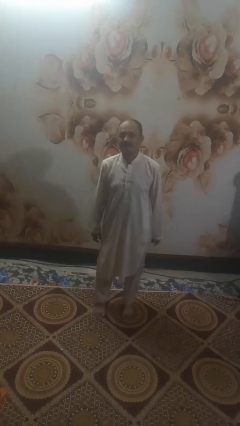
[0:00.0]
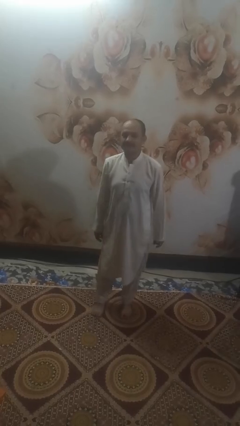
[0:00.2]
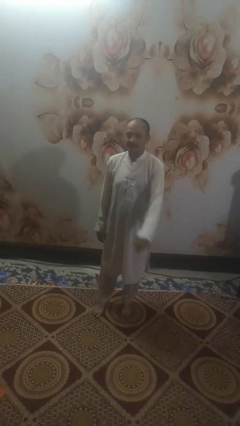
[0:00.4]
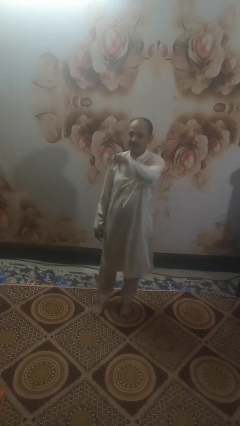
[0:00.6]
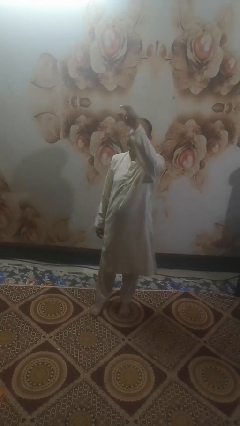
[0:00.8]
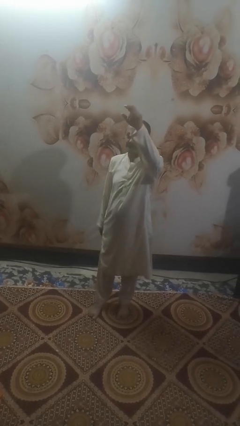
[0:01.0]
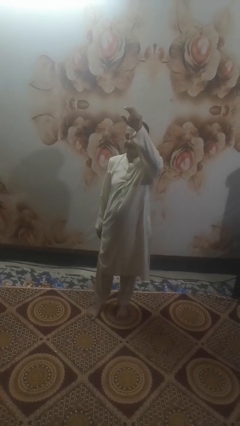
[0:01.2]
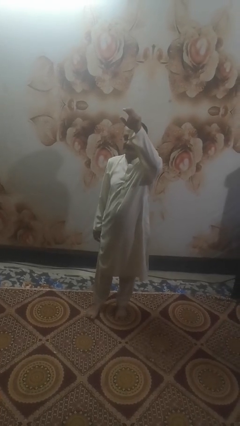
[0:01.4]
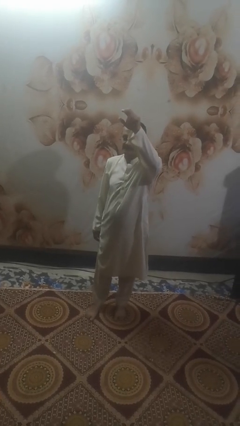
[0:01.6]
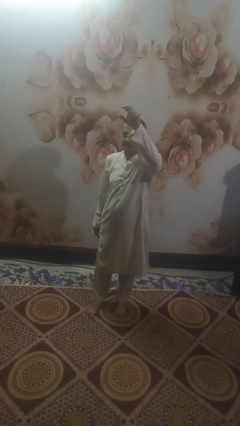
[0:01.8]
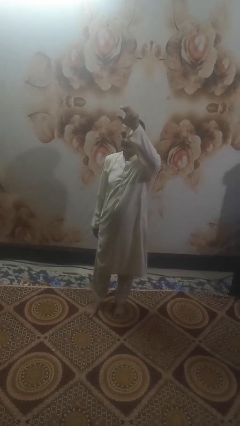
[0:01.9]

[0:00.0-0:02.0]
person gestures swipe up

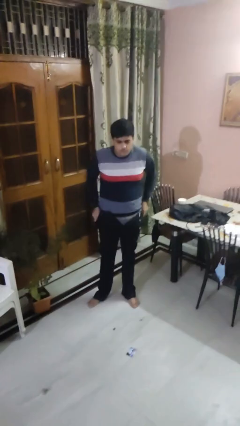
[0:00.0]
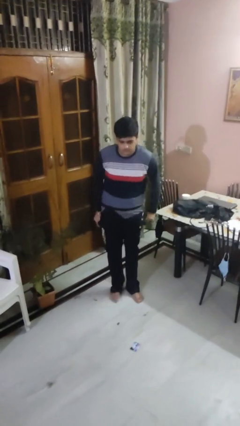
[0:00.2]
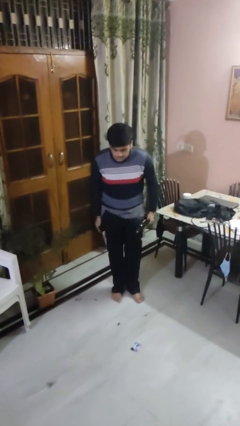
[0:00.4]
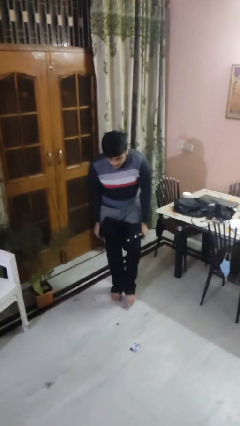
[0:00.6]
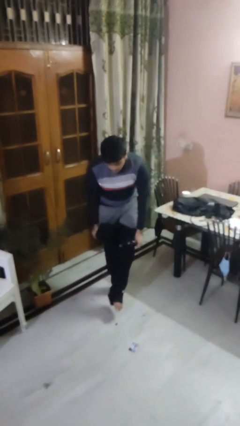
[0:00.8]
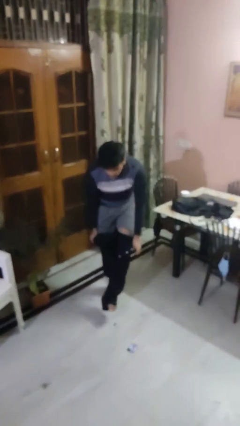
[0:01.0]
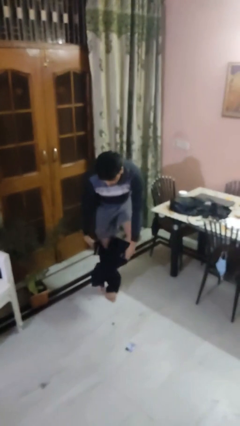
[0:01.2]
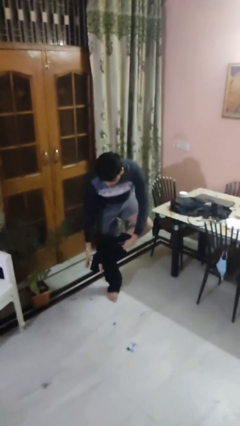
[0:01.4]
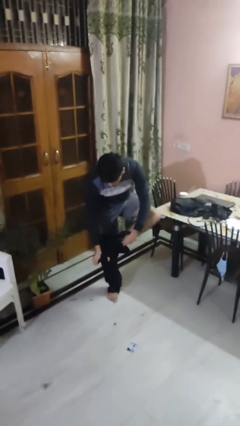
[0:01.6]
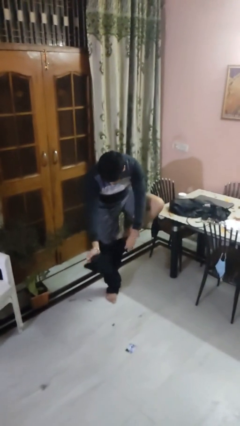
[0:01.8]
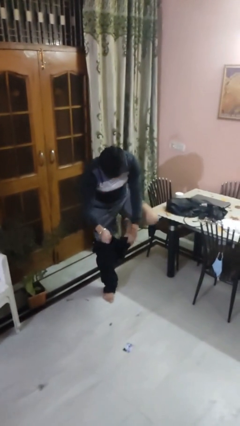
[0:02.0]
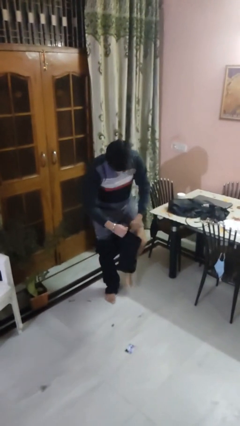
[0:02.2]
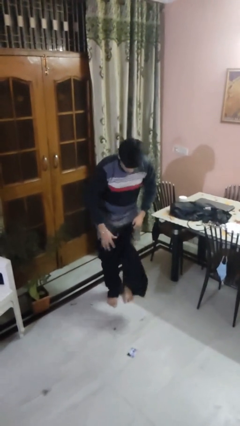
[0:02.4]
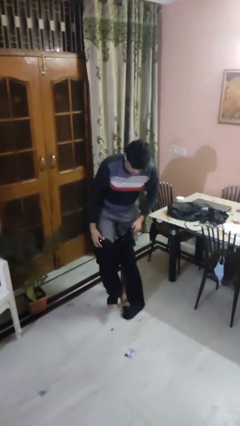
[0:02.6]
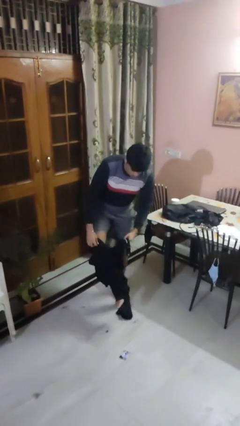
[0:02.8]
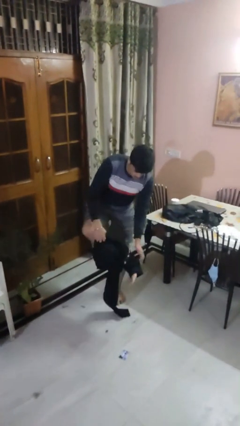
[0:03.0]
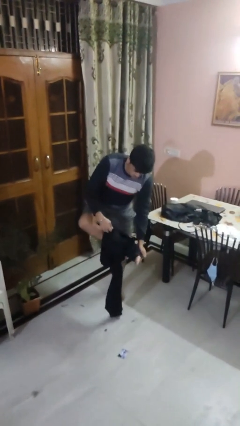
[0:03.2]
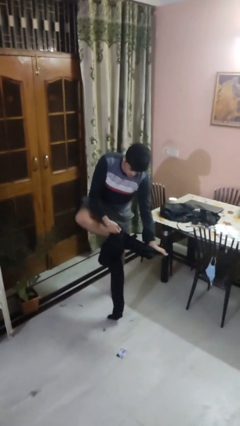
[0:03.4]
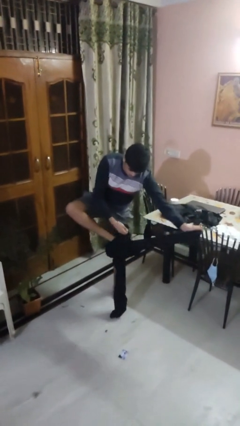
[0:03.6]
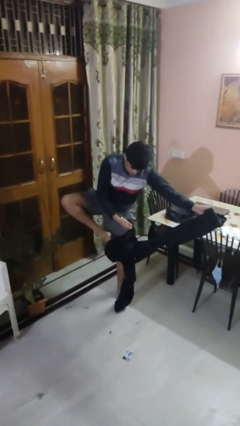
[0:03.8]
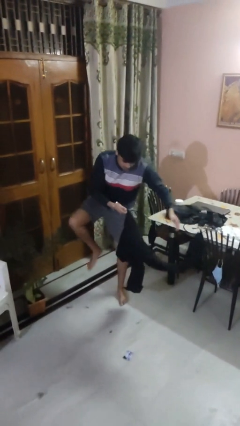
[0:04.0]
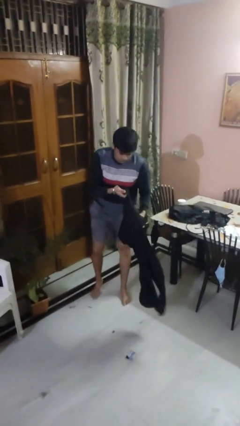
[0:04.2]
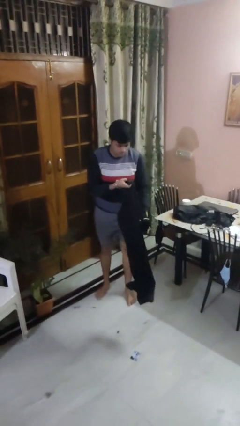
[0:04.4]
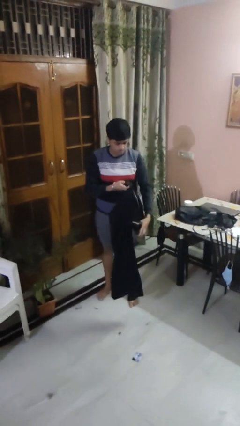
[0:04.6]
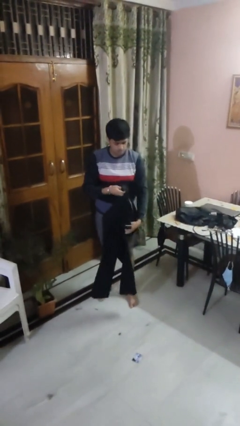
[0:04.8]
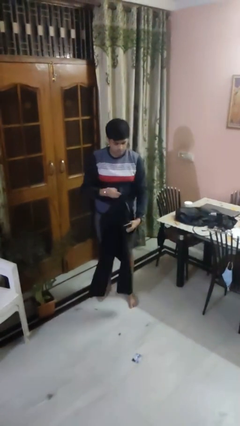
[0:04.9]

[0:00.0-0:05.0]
person takes off pants

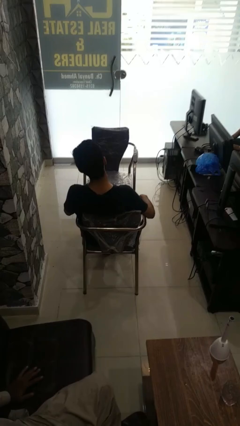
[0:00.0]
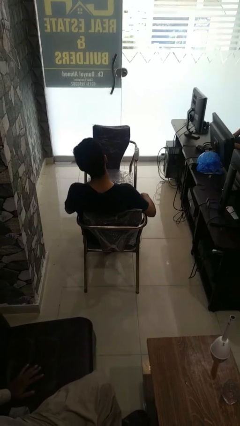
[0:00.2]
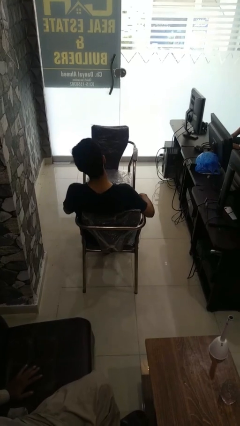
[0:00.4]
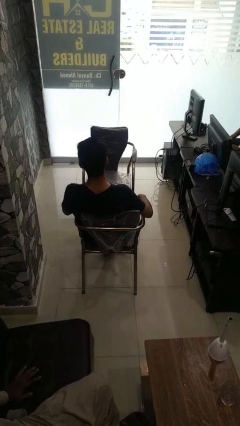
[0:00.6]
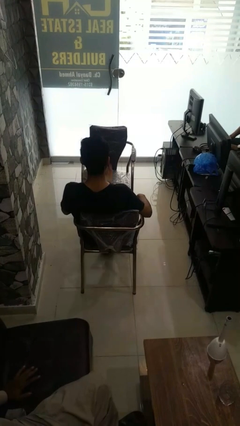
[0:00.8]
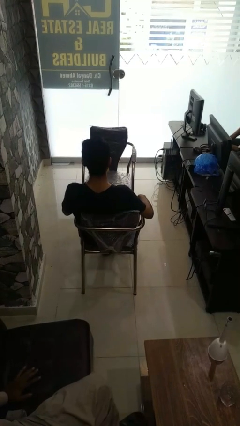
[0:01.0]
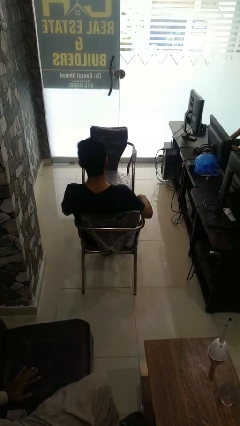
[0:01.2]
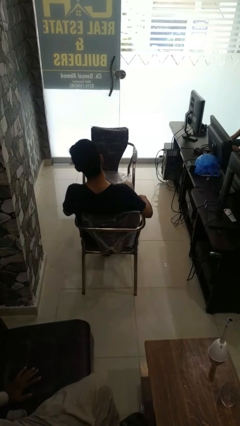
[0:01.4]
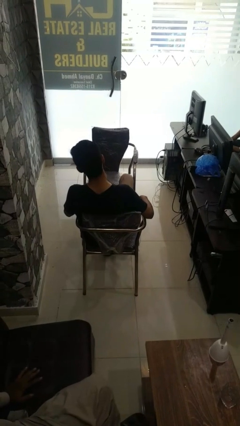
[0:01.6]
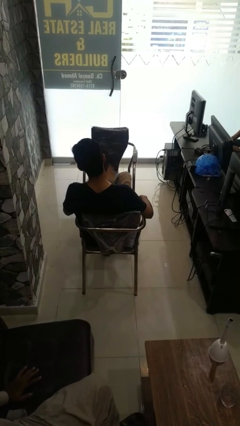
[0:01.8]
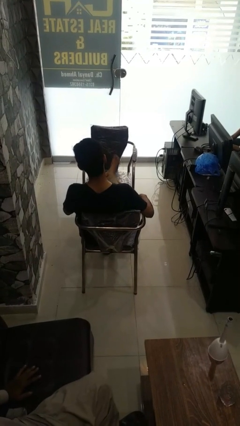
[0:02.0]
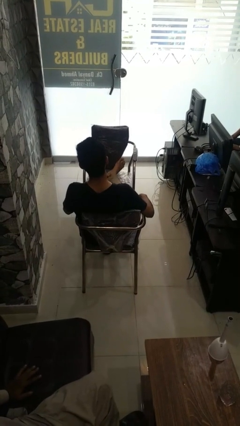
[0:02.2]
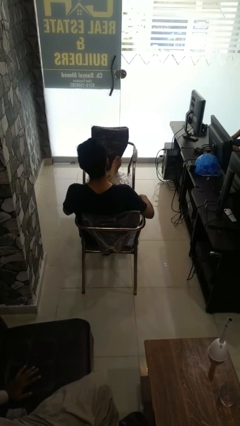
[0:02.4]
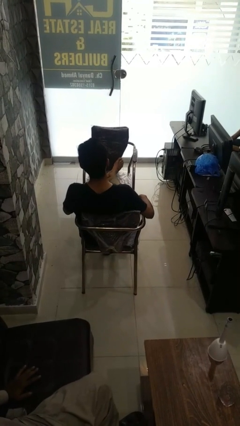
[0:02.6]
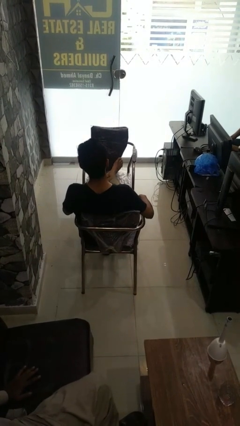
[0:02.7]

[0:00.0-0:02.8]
person puts feet up

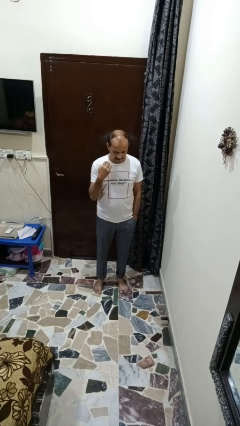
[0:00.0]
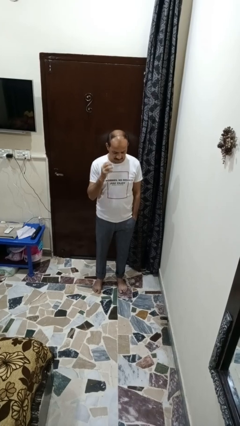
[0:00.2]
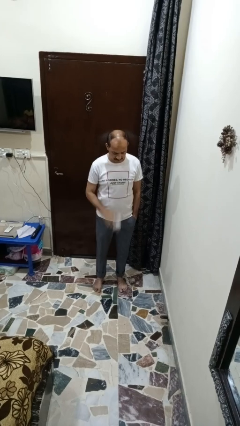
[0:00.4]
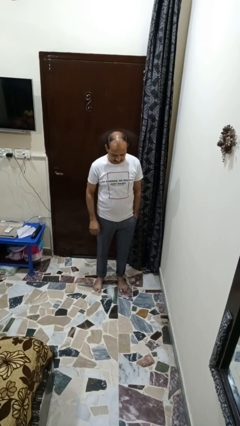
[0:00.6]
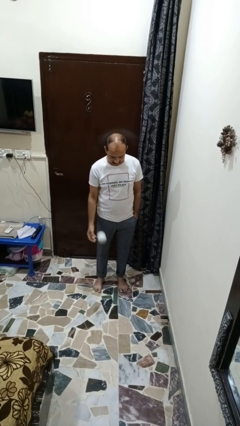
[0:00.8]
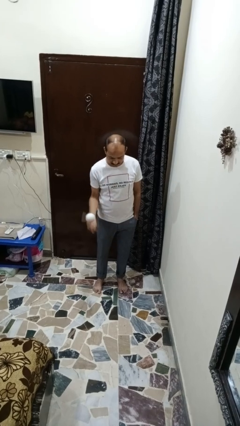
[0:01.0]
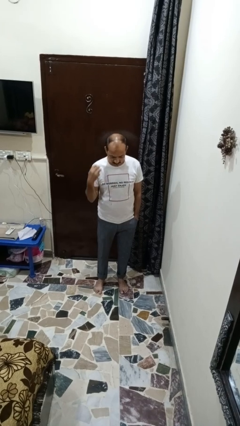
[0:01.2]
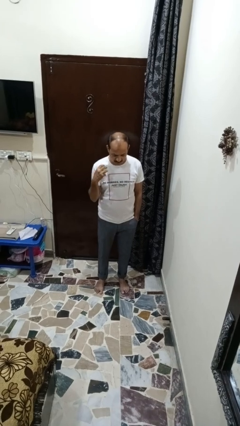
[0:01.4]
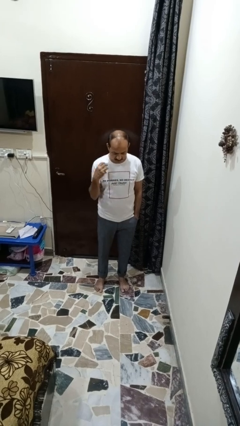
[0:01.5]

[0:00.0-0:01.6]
person bounces ball on floor

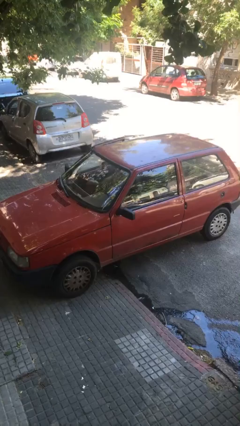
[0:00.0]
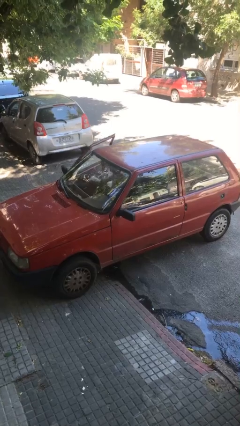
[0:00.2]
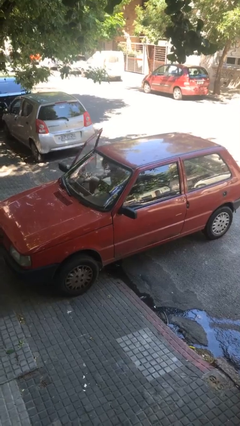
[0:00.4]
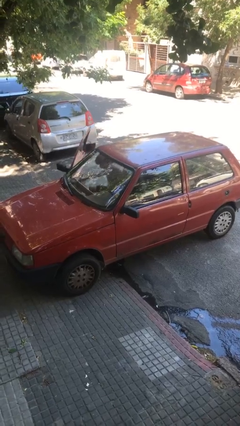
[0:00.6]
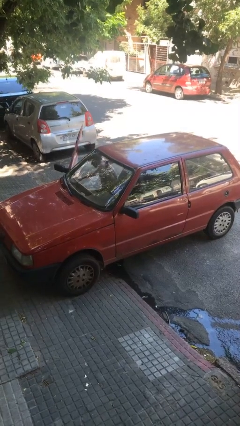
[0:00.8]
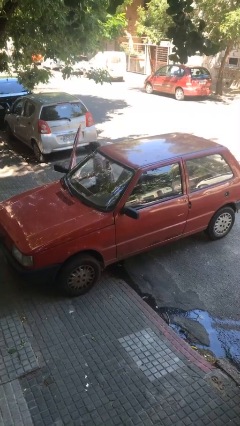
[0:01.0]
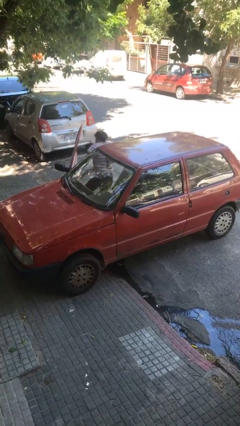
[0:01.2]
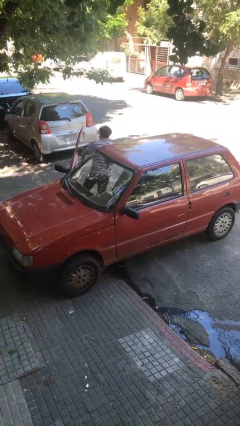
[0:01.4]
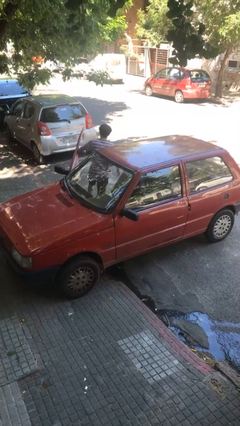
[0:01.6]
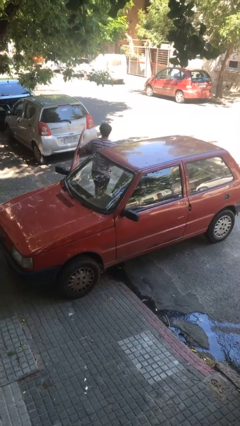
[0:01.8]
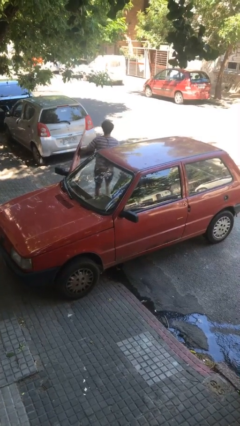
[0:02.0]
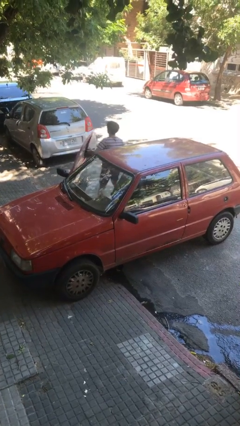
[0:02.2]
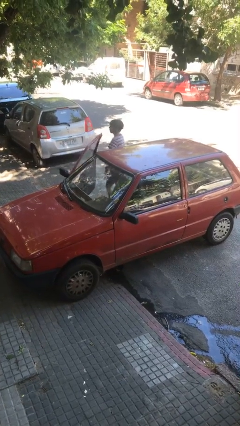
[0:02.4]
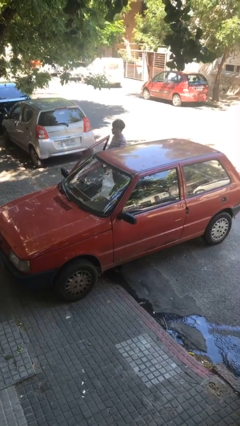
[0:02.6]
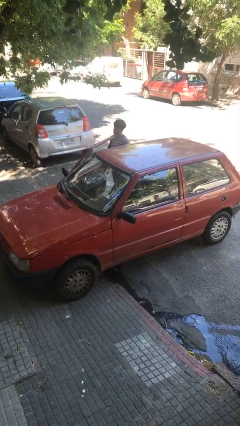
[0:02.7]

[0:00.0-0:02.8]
car drops off person

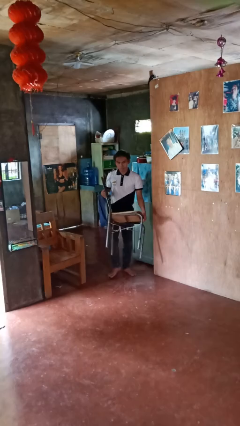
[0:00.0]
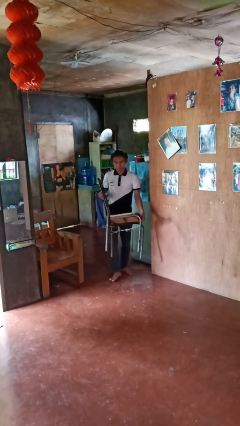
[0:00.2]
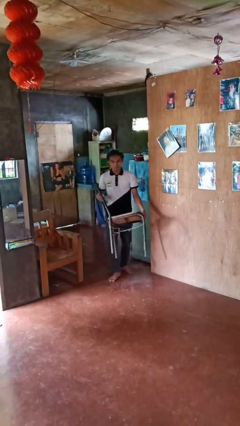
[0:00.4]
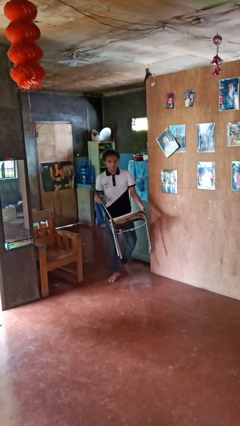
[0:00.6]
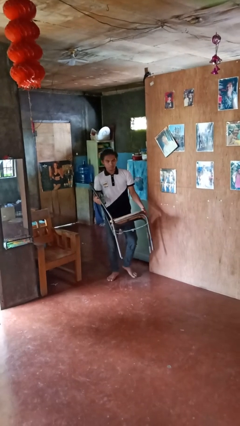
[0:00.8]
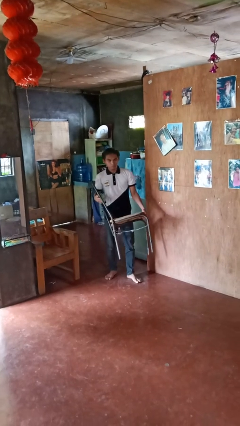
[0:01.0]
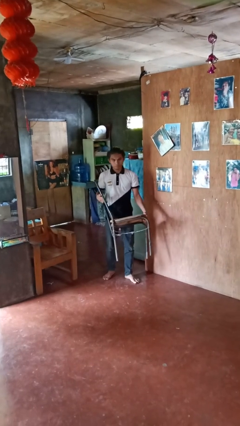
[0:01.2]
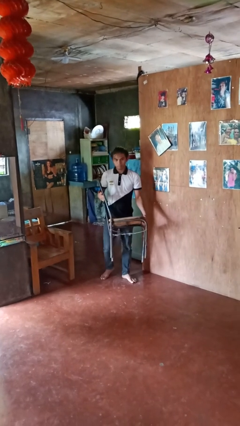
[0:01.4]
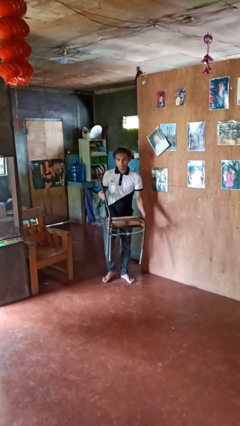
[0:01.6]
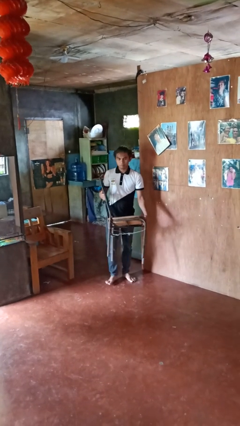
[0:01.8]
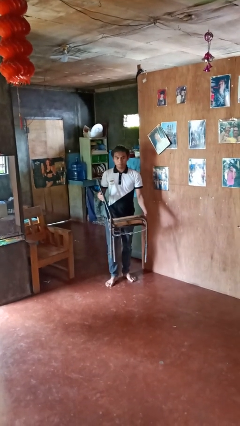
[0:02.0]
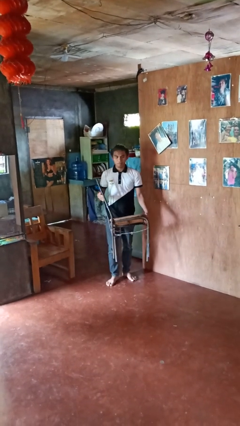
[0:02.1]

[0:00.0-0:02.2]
person carries furniture

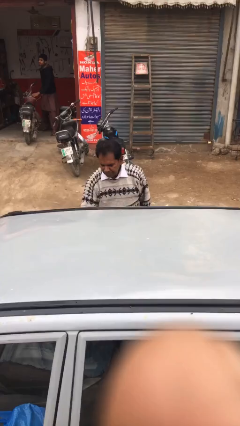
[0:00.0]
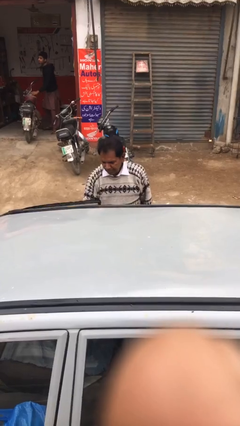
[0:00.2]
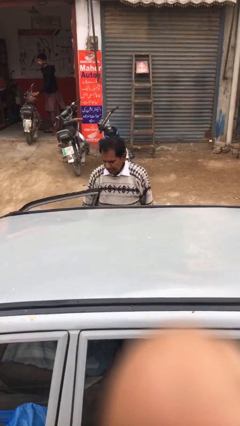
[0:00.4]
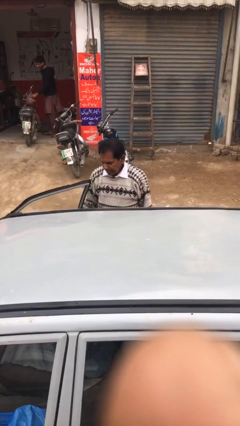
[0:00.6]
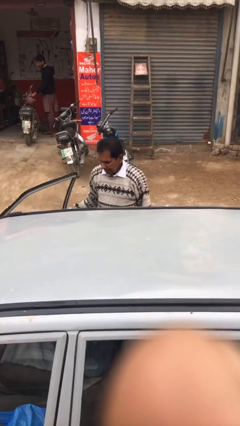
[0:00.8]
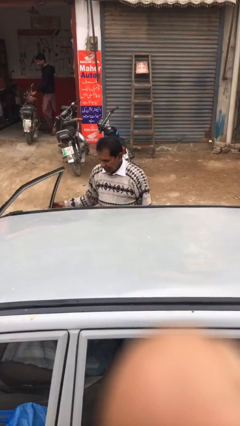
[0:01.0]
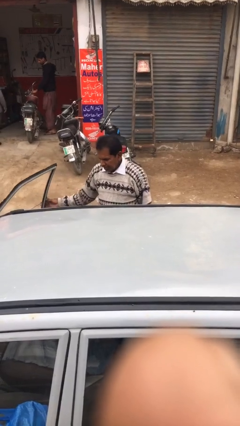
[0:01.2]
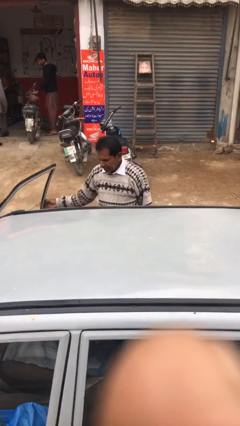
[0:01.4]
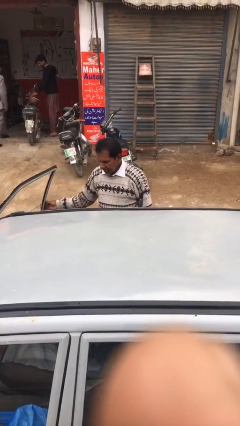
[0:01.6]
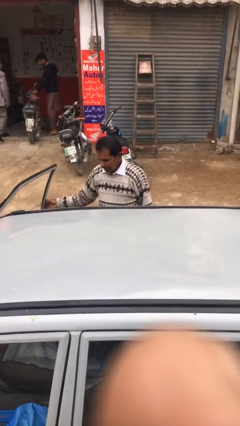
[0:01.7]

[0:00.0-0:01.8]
person opens car door
